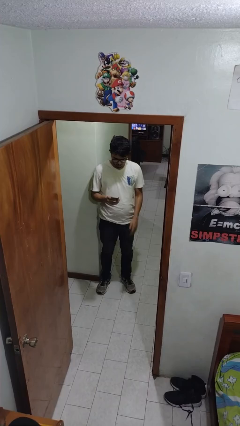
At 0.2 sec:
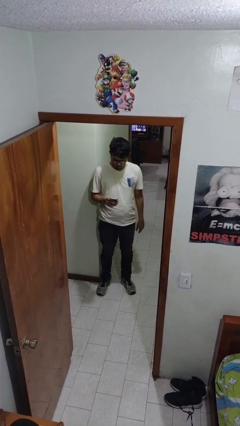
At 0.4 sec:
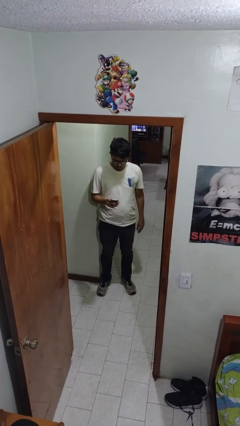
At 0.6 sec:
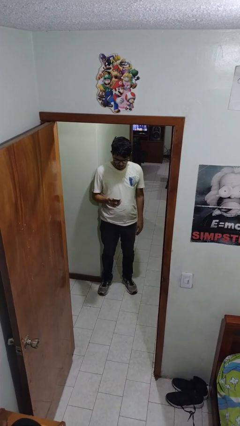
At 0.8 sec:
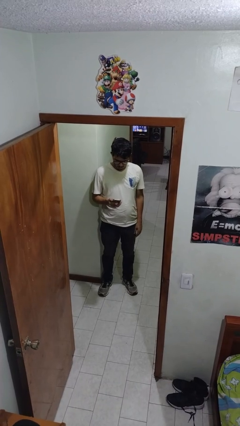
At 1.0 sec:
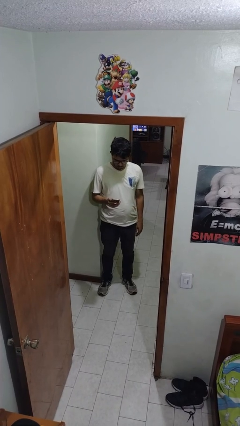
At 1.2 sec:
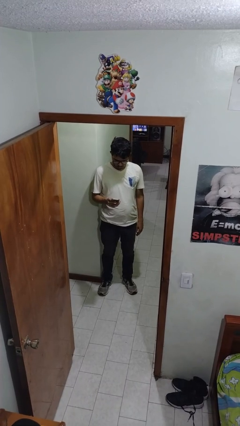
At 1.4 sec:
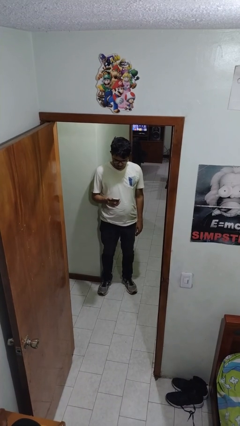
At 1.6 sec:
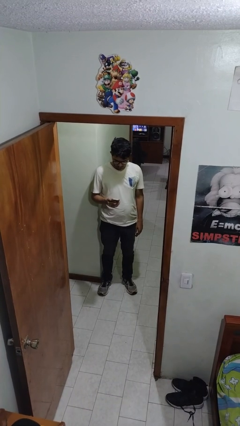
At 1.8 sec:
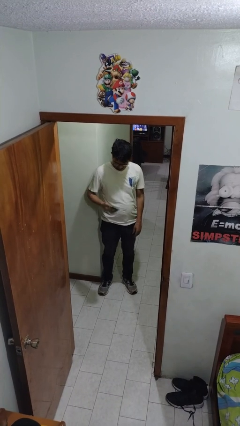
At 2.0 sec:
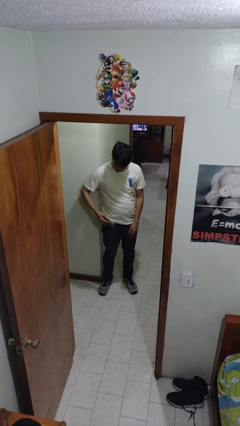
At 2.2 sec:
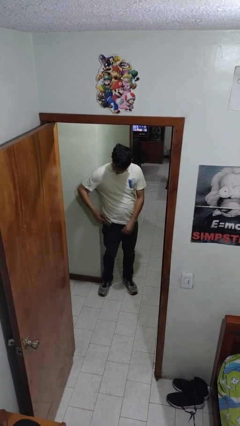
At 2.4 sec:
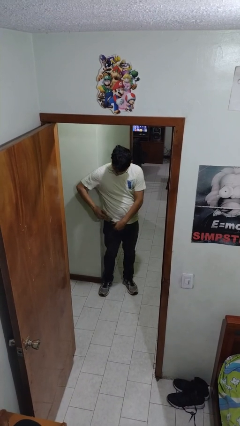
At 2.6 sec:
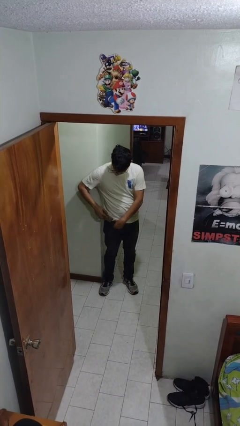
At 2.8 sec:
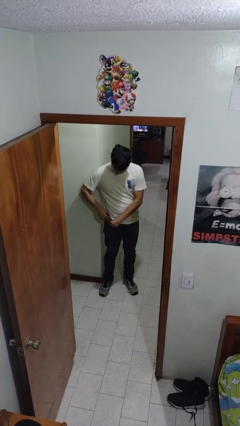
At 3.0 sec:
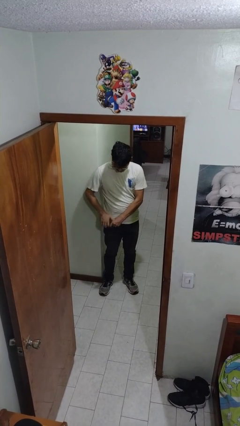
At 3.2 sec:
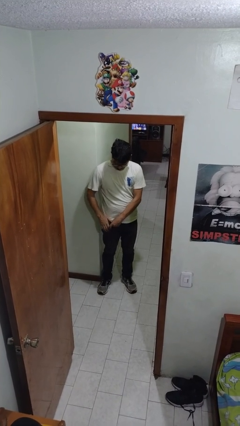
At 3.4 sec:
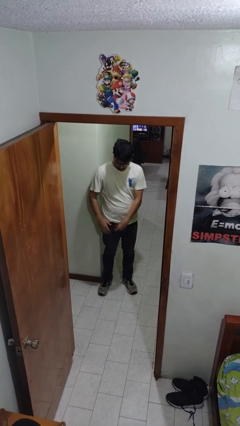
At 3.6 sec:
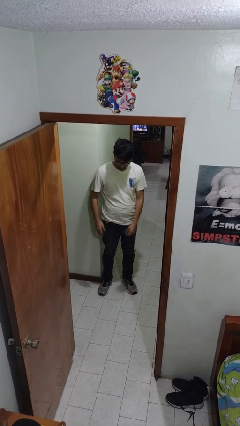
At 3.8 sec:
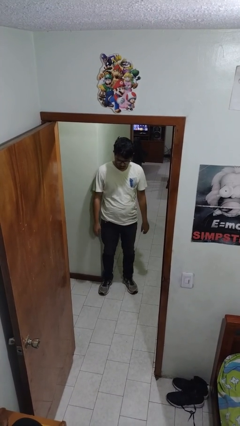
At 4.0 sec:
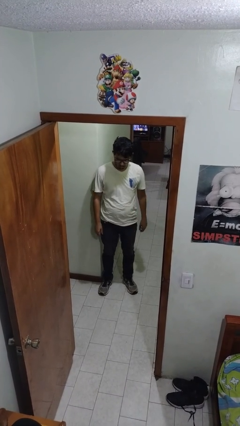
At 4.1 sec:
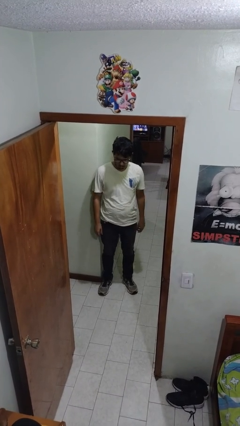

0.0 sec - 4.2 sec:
person puts phone into pocket

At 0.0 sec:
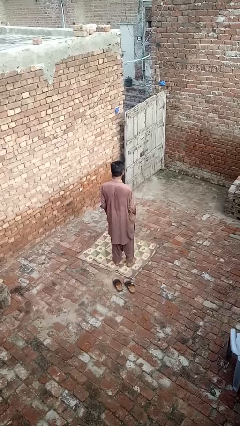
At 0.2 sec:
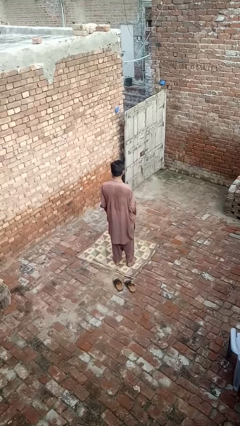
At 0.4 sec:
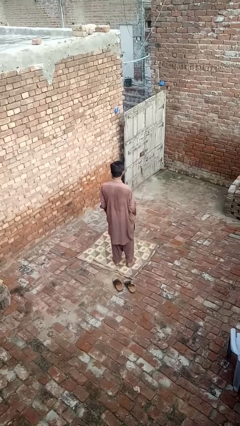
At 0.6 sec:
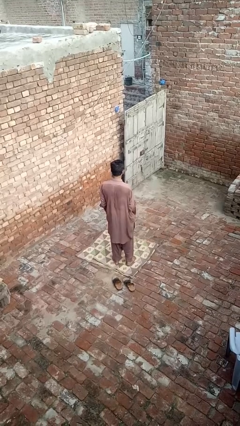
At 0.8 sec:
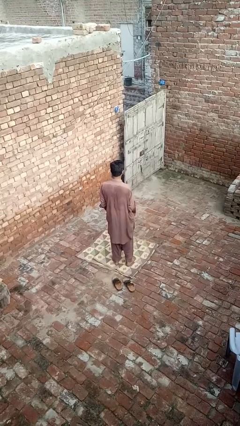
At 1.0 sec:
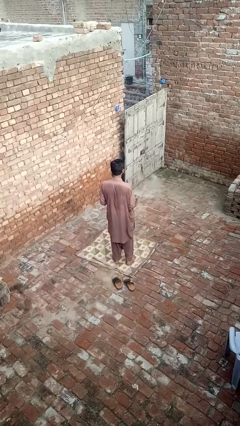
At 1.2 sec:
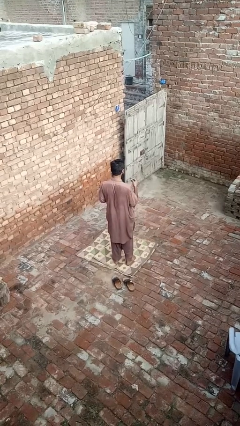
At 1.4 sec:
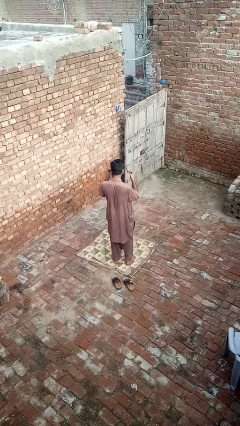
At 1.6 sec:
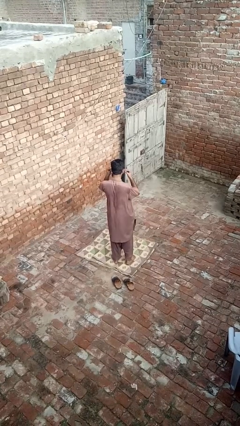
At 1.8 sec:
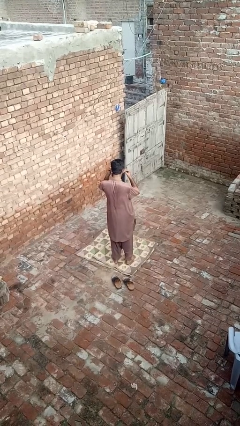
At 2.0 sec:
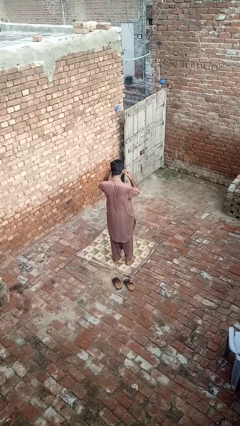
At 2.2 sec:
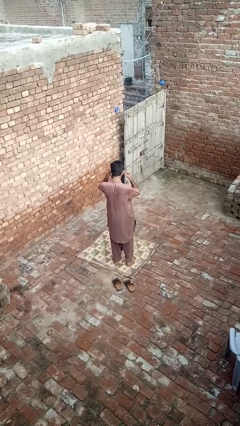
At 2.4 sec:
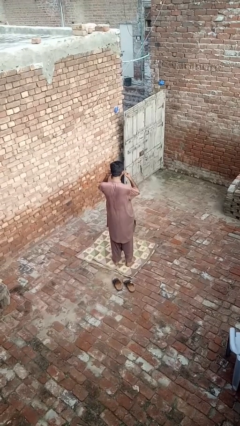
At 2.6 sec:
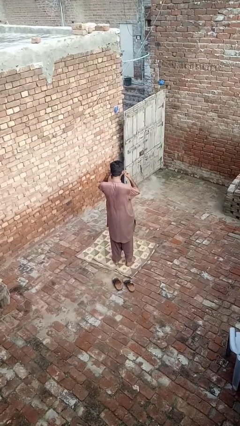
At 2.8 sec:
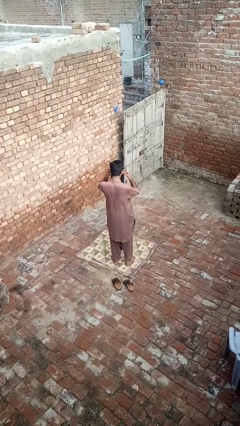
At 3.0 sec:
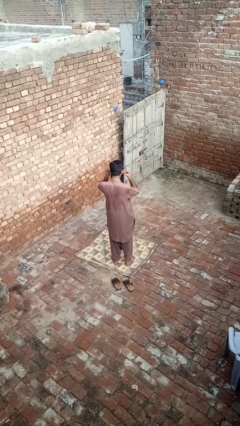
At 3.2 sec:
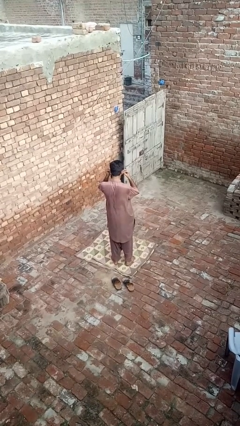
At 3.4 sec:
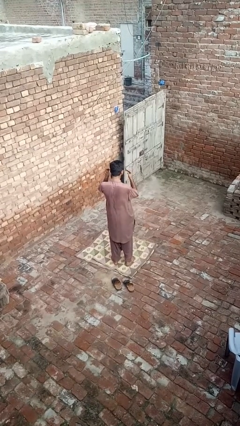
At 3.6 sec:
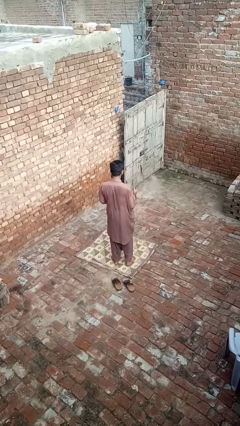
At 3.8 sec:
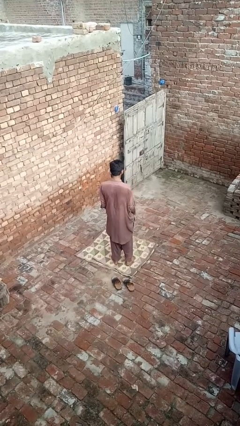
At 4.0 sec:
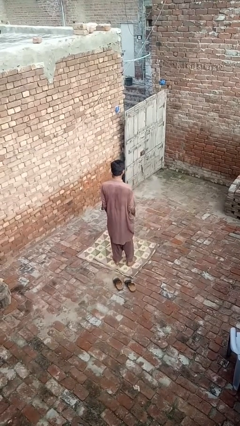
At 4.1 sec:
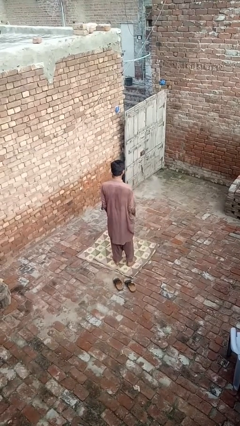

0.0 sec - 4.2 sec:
person puts on headphones

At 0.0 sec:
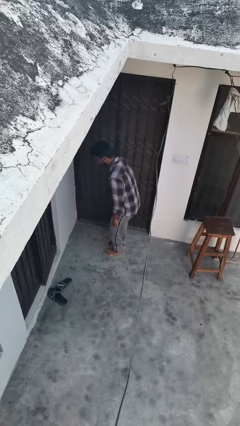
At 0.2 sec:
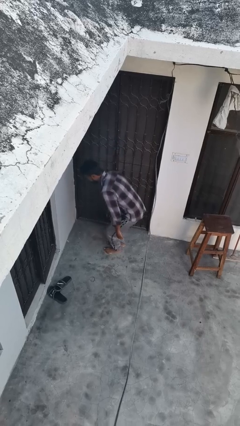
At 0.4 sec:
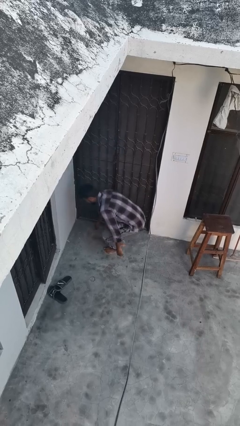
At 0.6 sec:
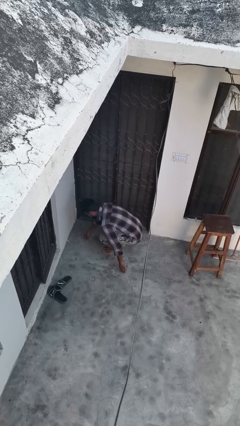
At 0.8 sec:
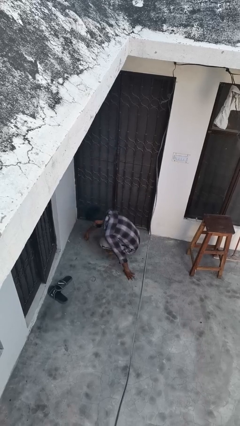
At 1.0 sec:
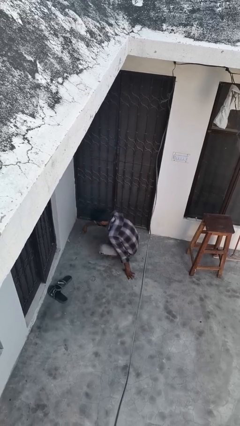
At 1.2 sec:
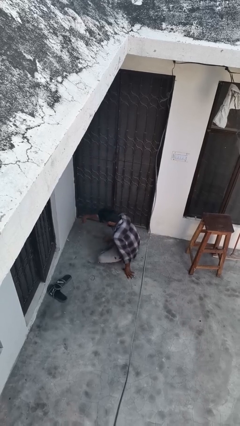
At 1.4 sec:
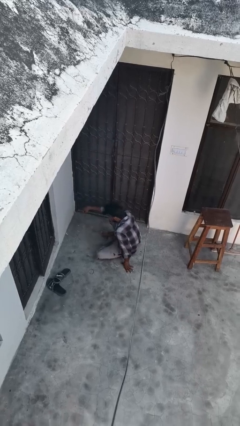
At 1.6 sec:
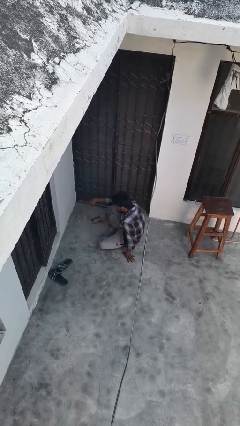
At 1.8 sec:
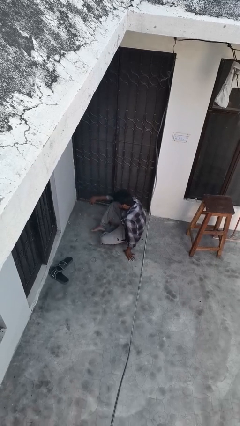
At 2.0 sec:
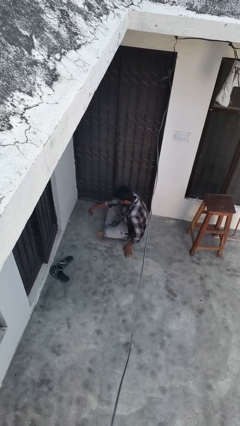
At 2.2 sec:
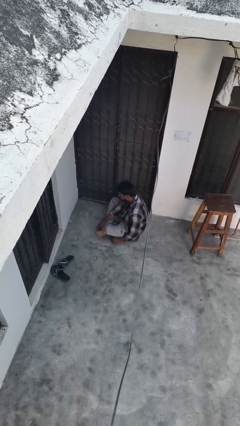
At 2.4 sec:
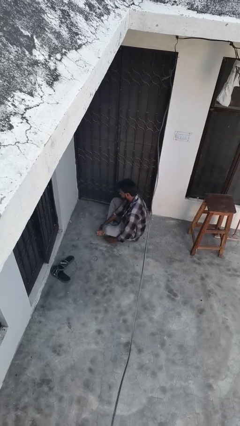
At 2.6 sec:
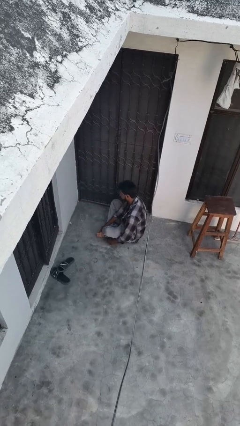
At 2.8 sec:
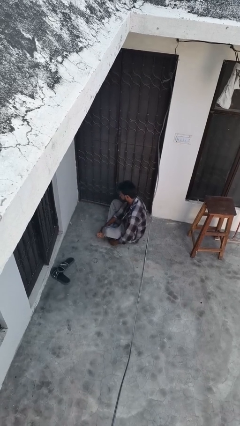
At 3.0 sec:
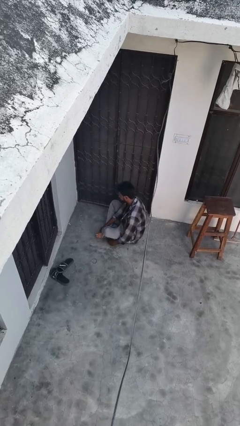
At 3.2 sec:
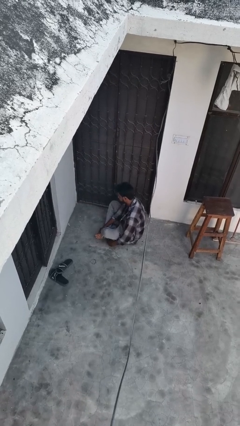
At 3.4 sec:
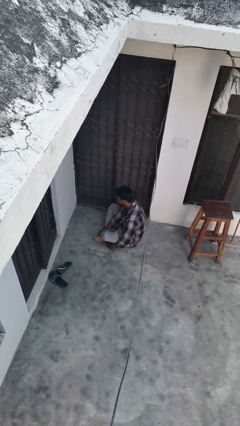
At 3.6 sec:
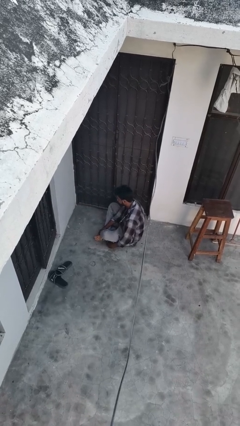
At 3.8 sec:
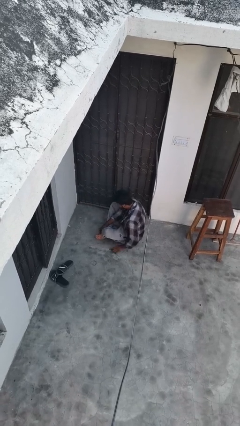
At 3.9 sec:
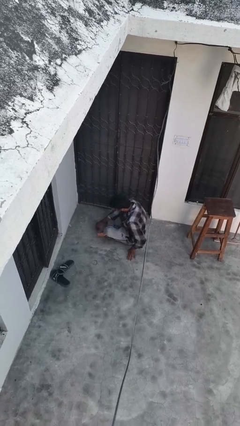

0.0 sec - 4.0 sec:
person sits crisscross

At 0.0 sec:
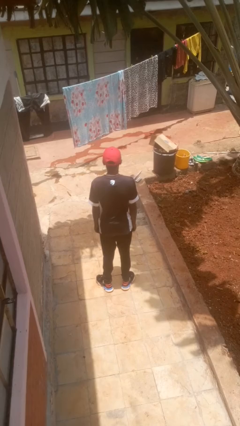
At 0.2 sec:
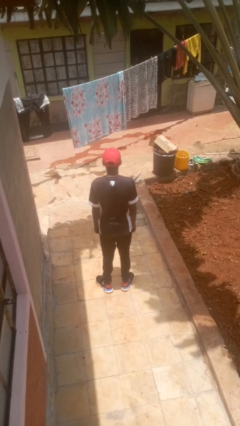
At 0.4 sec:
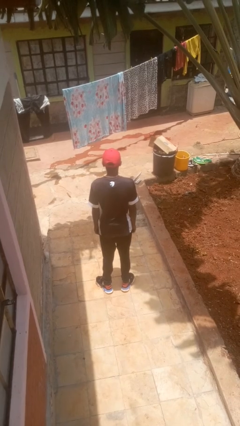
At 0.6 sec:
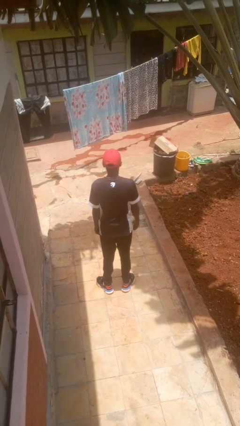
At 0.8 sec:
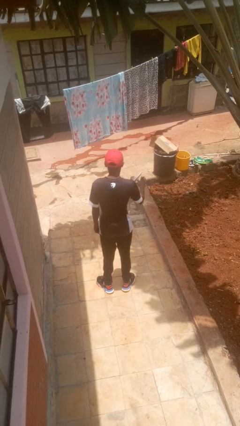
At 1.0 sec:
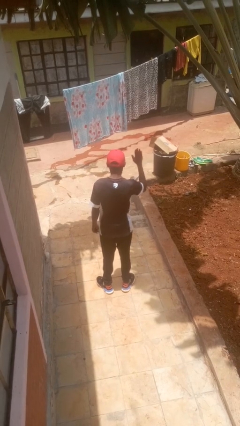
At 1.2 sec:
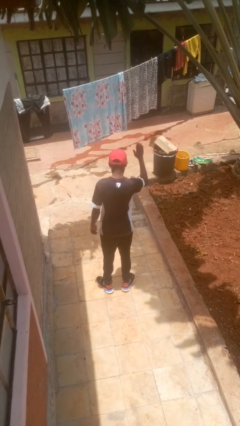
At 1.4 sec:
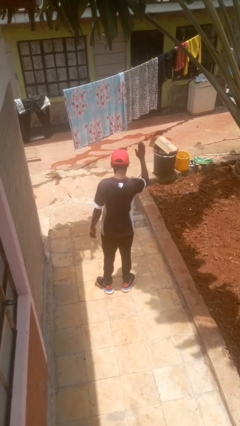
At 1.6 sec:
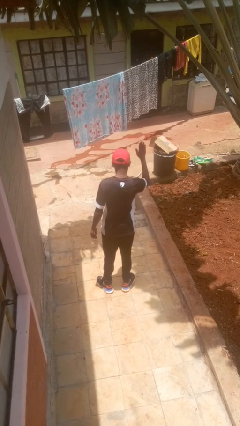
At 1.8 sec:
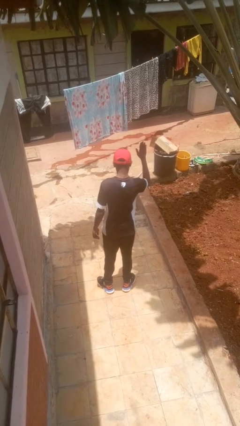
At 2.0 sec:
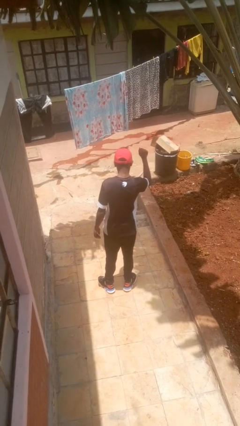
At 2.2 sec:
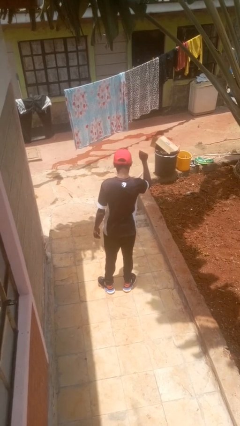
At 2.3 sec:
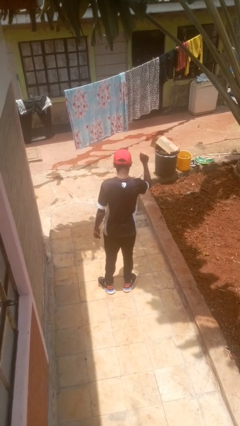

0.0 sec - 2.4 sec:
person gestures stop

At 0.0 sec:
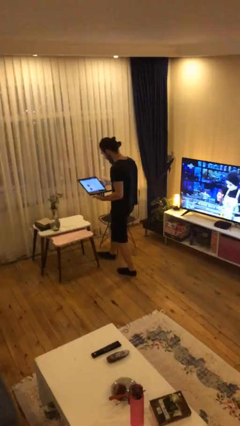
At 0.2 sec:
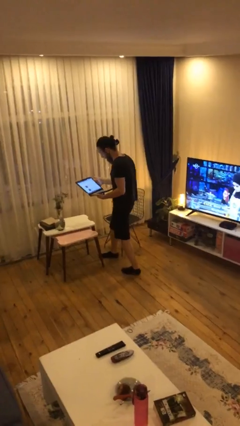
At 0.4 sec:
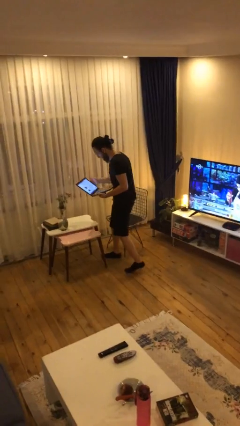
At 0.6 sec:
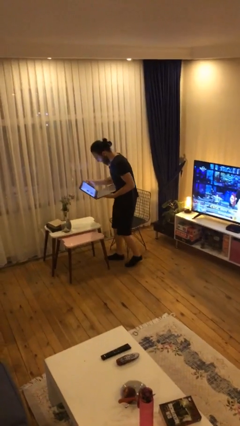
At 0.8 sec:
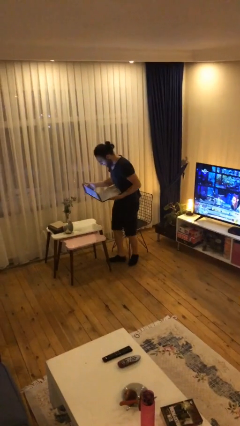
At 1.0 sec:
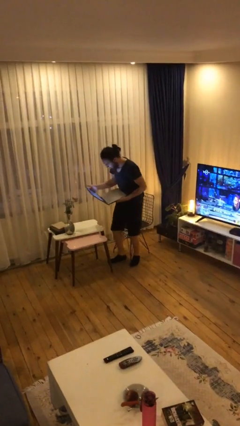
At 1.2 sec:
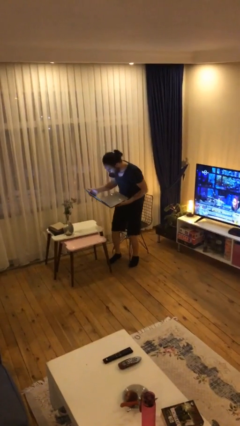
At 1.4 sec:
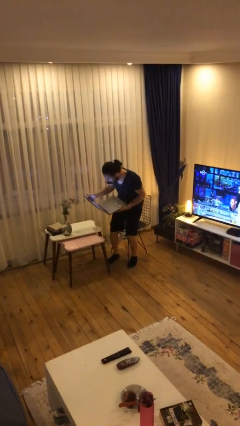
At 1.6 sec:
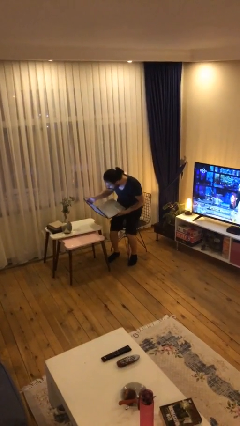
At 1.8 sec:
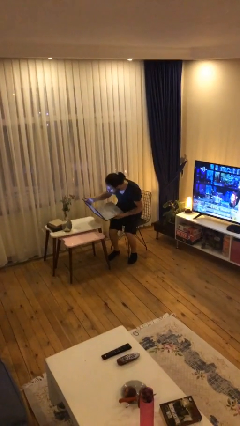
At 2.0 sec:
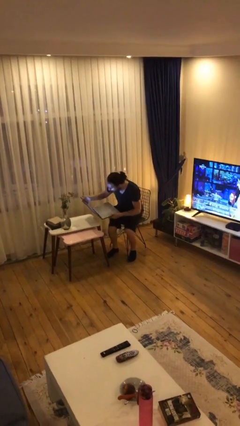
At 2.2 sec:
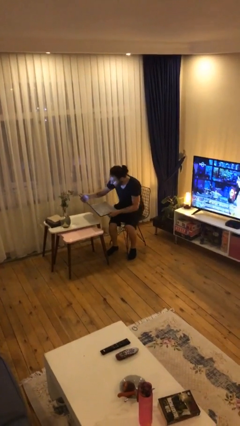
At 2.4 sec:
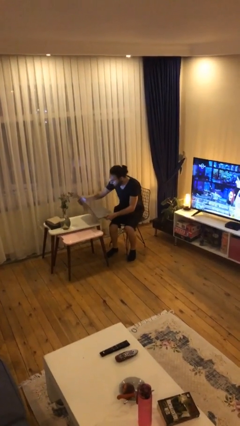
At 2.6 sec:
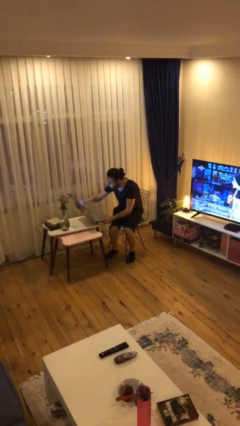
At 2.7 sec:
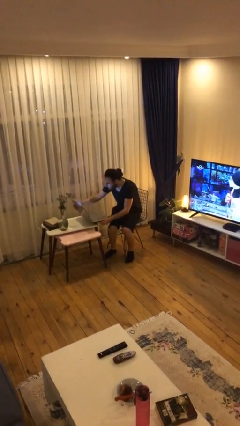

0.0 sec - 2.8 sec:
person sits down
